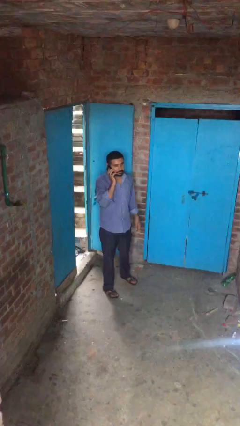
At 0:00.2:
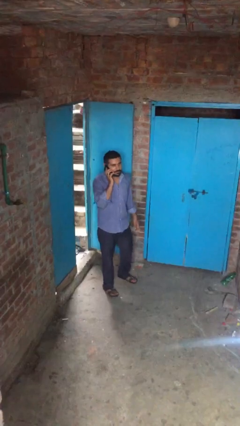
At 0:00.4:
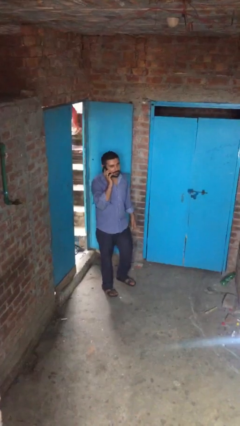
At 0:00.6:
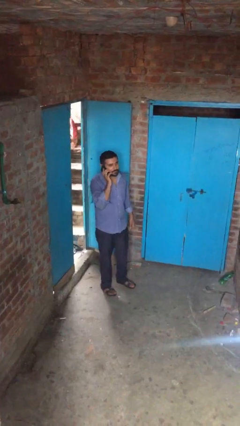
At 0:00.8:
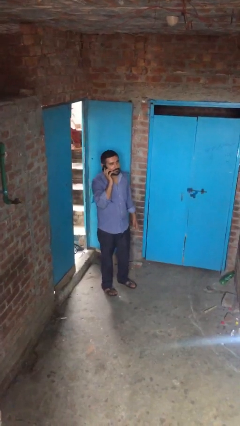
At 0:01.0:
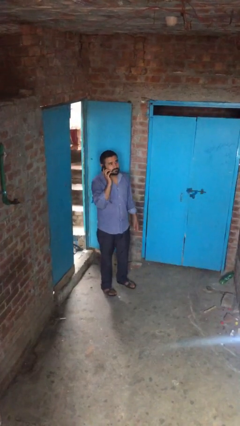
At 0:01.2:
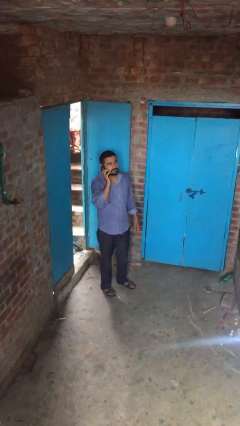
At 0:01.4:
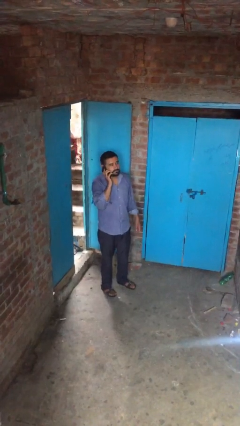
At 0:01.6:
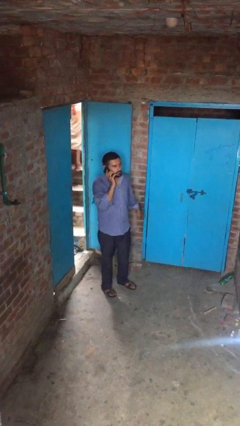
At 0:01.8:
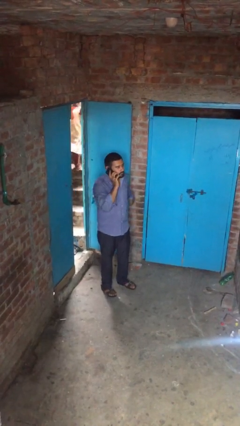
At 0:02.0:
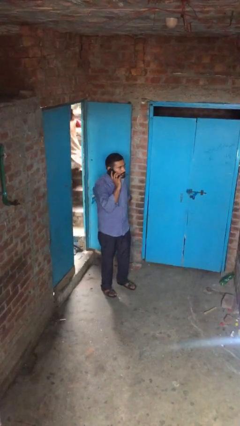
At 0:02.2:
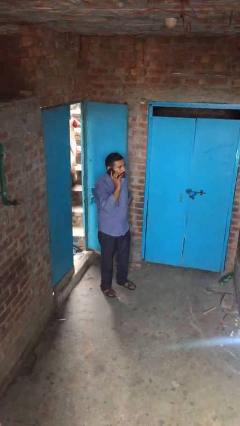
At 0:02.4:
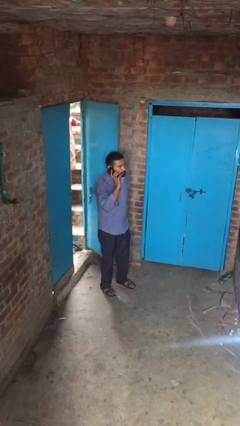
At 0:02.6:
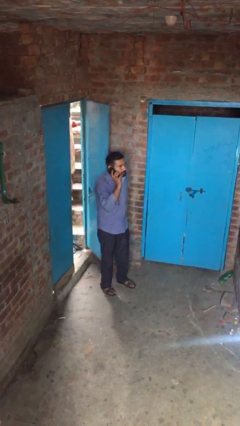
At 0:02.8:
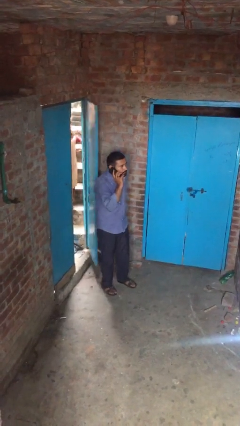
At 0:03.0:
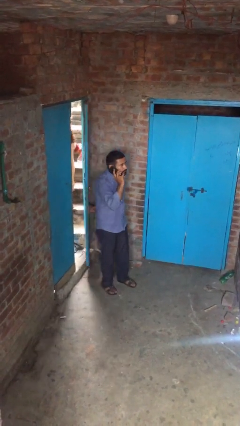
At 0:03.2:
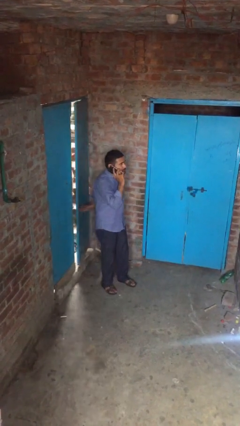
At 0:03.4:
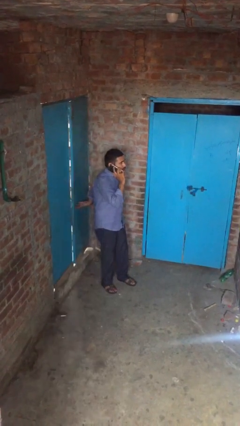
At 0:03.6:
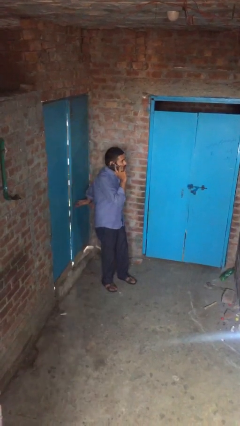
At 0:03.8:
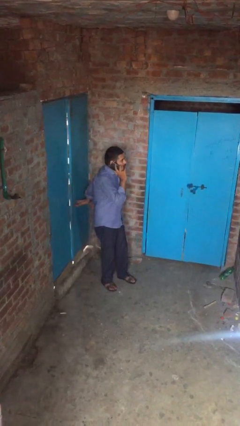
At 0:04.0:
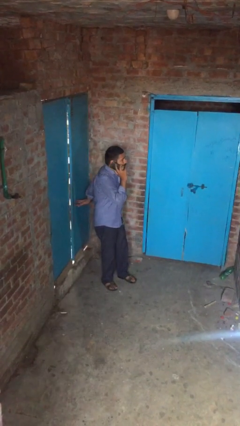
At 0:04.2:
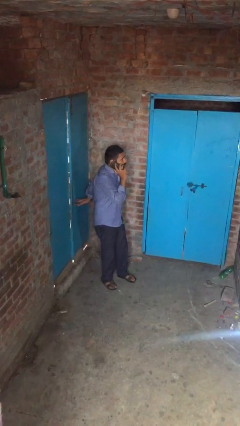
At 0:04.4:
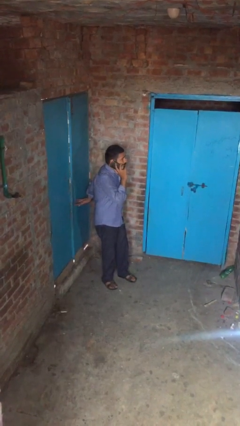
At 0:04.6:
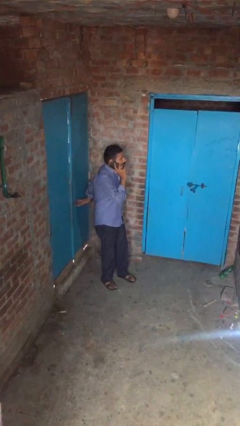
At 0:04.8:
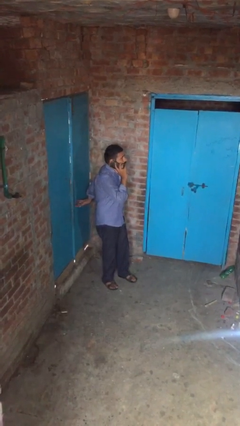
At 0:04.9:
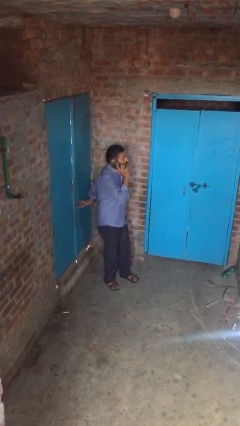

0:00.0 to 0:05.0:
person closes facility door

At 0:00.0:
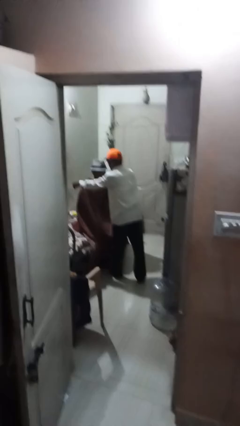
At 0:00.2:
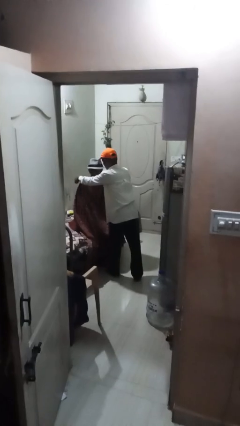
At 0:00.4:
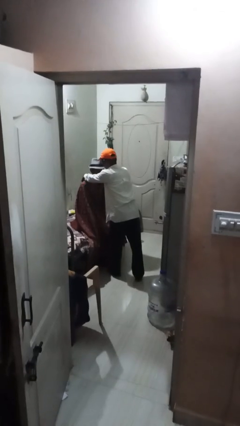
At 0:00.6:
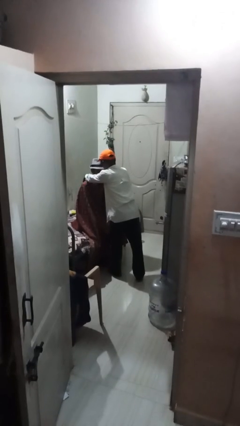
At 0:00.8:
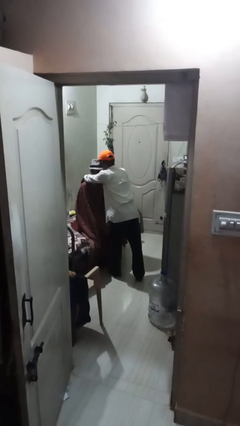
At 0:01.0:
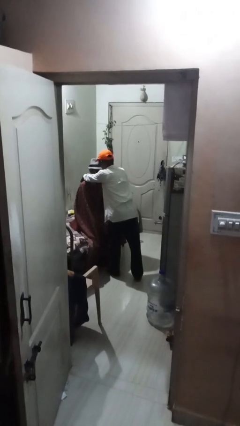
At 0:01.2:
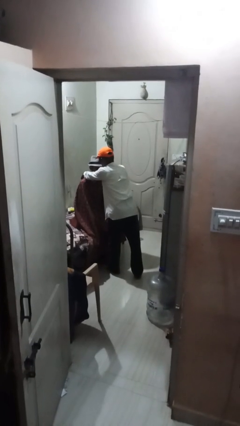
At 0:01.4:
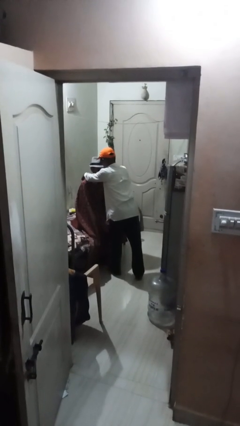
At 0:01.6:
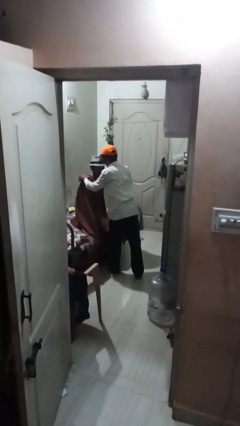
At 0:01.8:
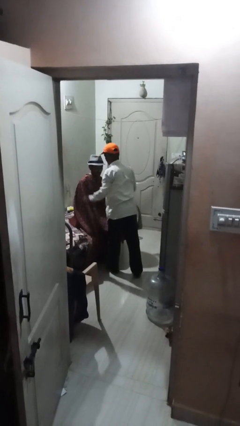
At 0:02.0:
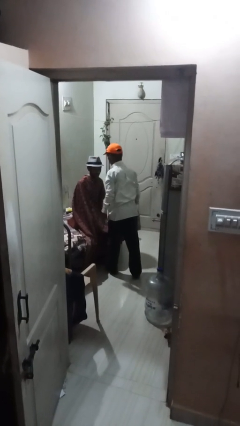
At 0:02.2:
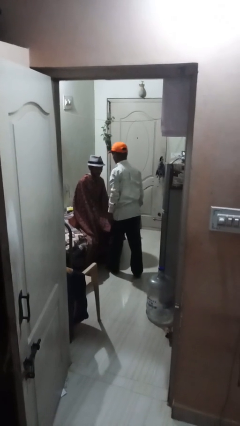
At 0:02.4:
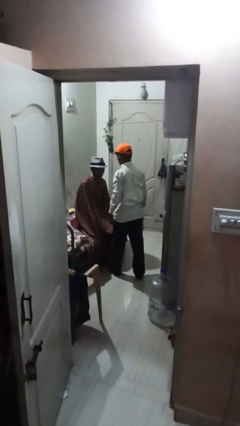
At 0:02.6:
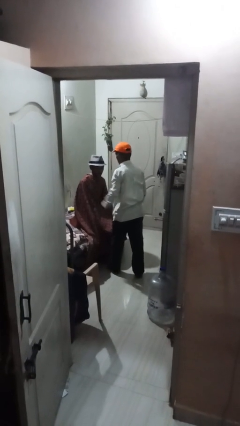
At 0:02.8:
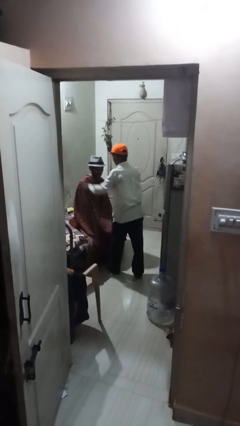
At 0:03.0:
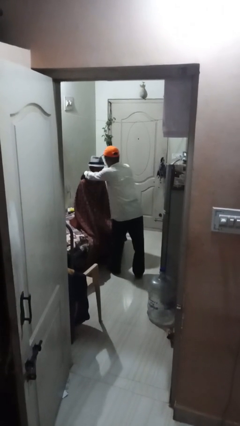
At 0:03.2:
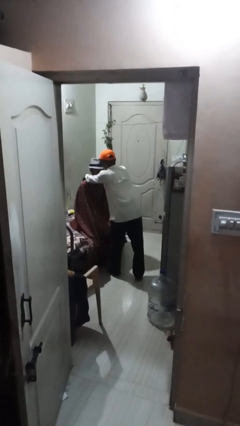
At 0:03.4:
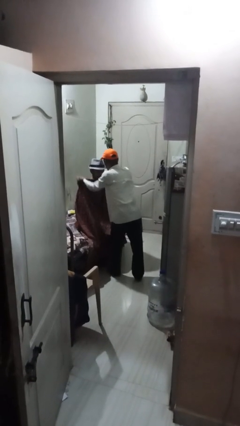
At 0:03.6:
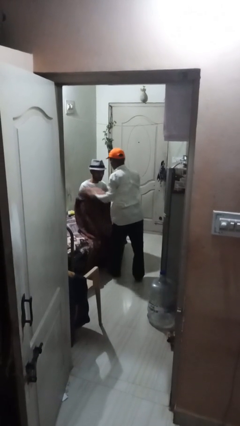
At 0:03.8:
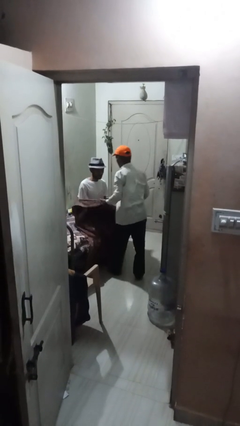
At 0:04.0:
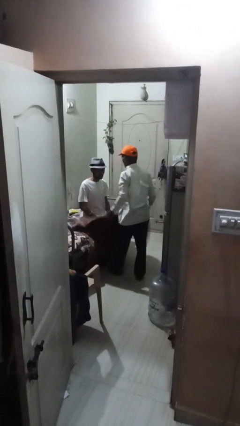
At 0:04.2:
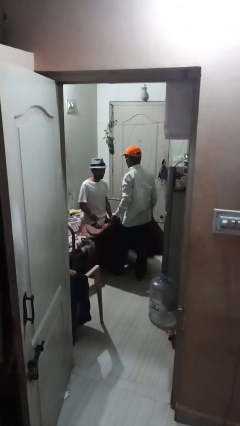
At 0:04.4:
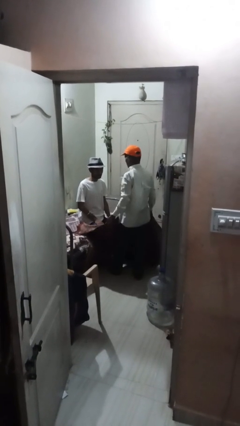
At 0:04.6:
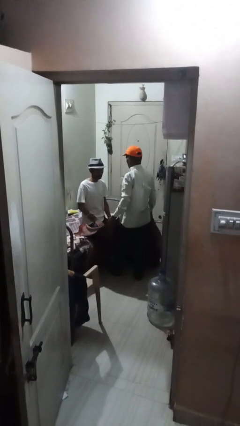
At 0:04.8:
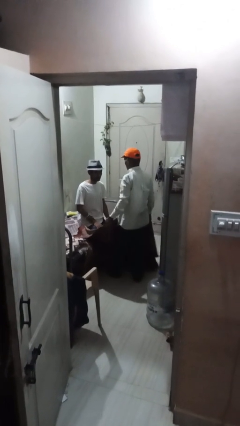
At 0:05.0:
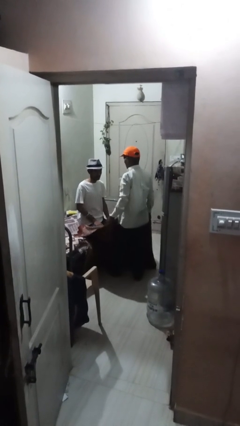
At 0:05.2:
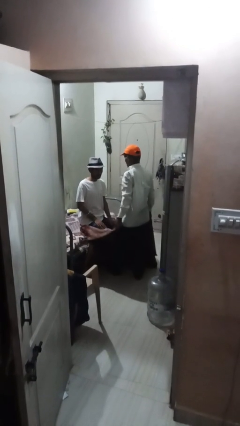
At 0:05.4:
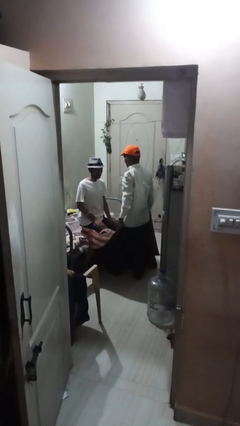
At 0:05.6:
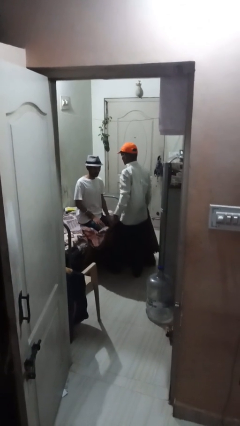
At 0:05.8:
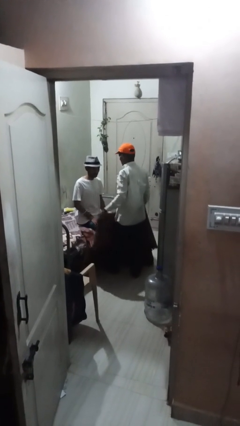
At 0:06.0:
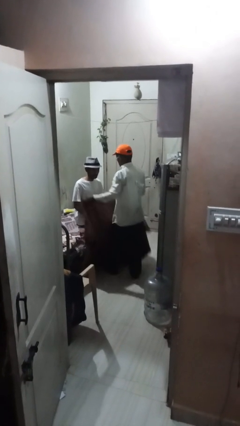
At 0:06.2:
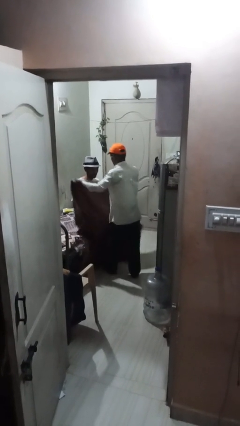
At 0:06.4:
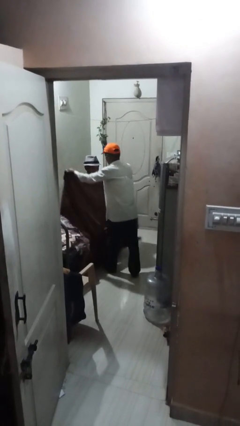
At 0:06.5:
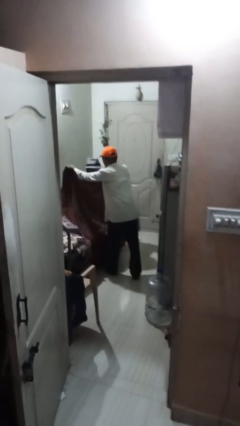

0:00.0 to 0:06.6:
person uncovers friend with blanket

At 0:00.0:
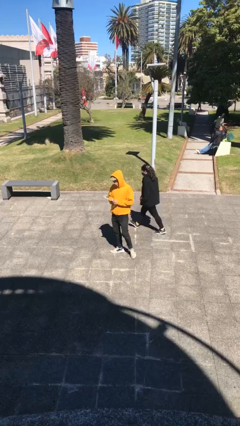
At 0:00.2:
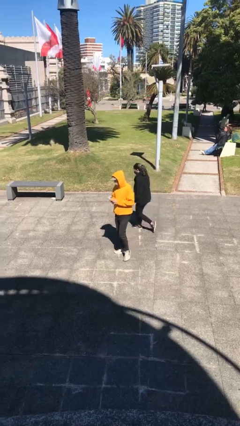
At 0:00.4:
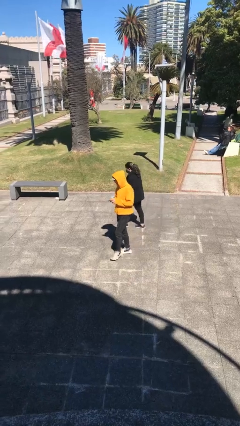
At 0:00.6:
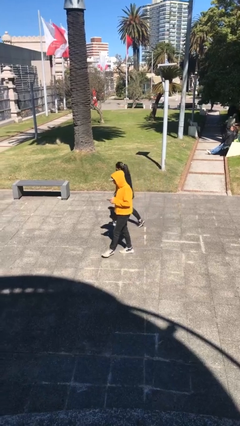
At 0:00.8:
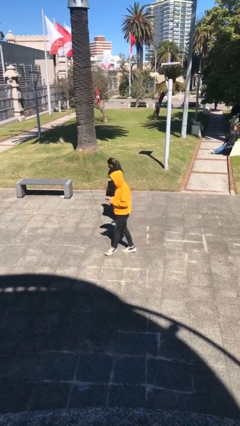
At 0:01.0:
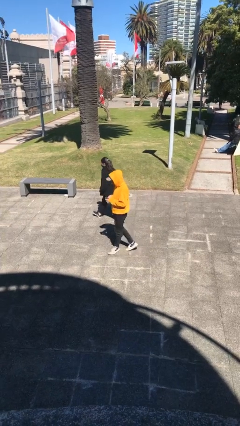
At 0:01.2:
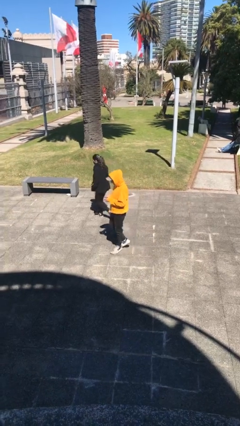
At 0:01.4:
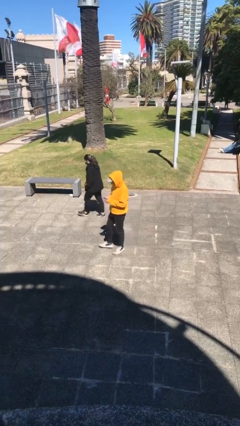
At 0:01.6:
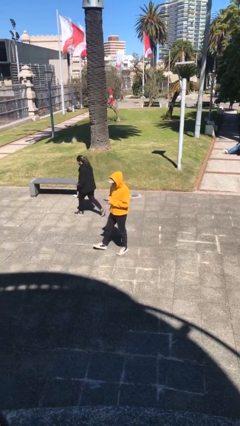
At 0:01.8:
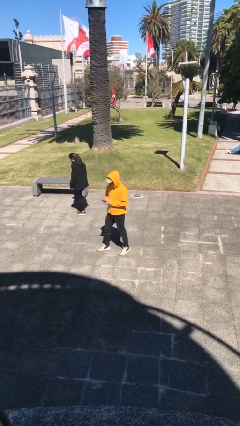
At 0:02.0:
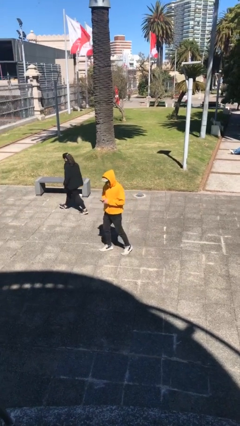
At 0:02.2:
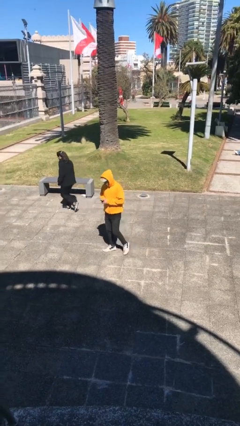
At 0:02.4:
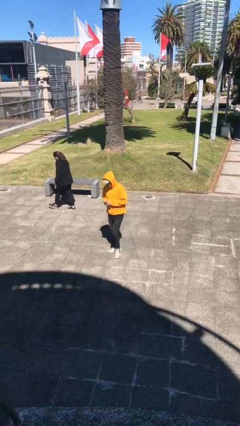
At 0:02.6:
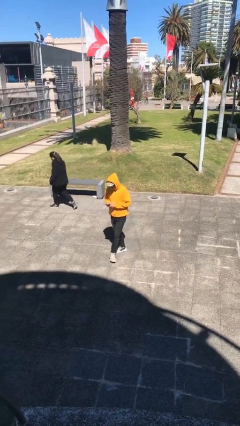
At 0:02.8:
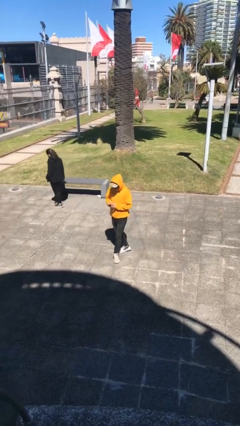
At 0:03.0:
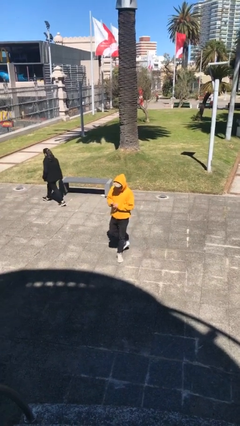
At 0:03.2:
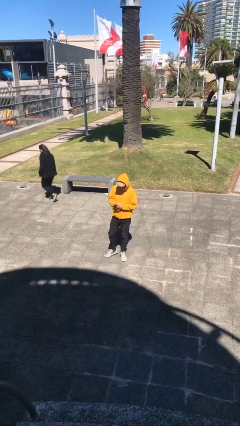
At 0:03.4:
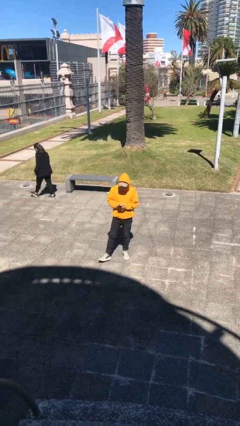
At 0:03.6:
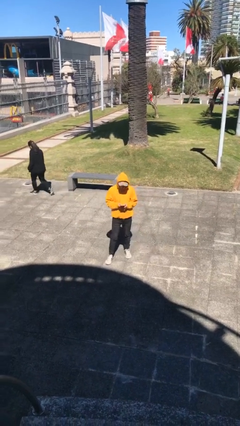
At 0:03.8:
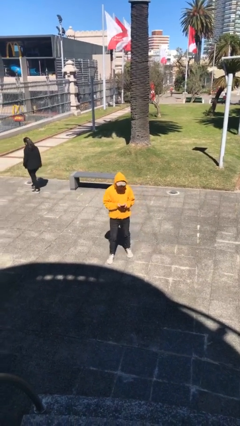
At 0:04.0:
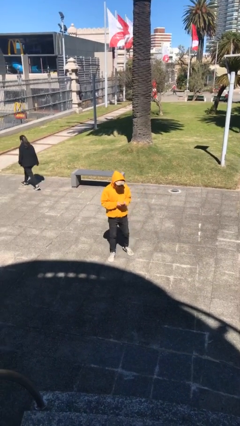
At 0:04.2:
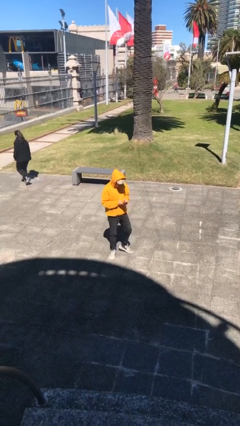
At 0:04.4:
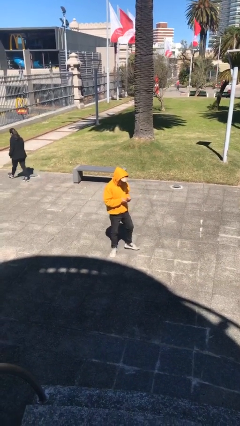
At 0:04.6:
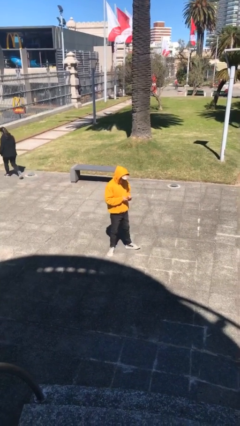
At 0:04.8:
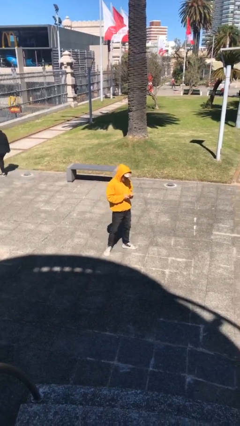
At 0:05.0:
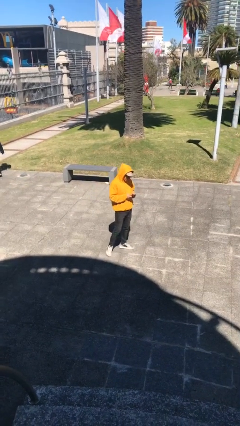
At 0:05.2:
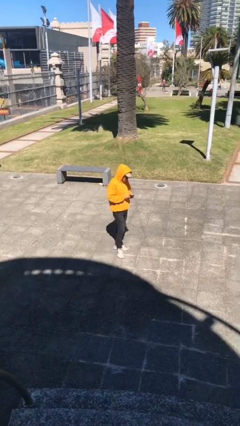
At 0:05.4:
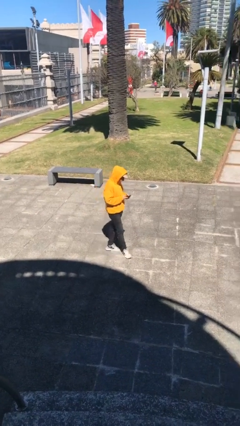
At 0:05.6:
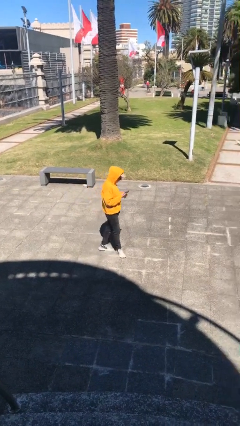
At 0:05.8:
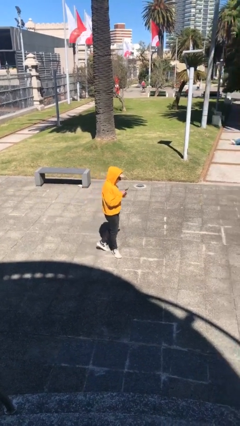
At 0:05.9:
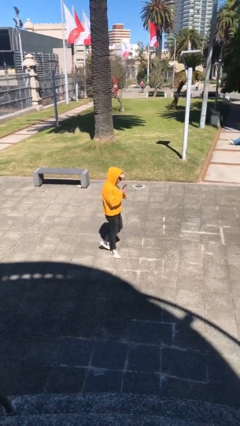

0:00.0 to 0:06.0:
person texts on phone

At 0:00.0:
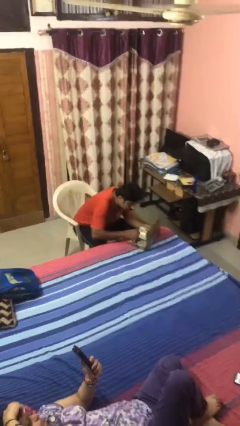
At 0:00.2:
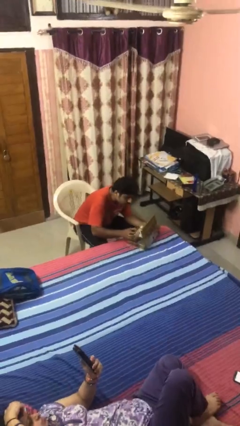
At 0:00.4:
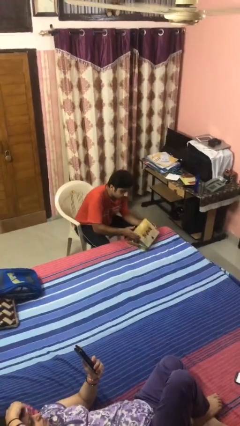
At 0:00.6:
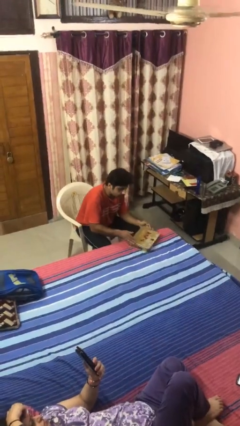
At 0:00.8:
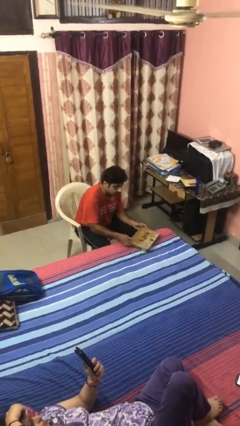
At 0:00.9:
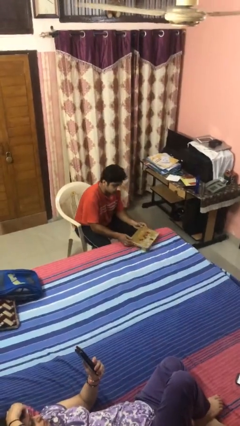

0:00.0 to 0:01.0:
person closes jewelry box
